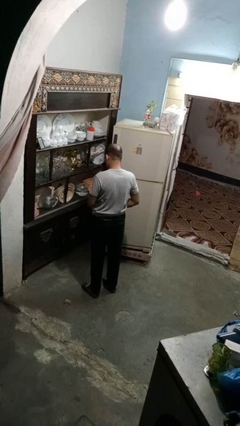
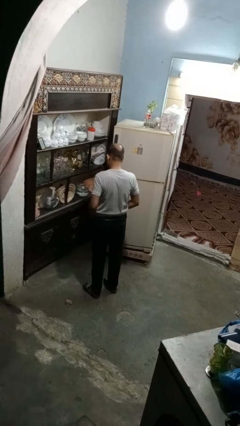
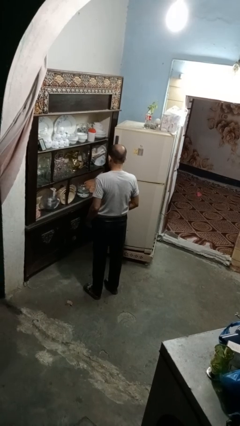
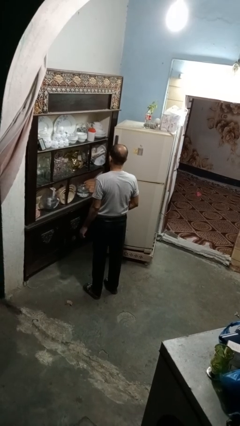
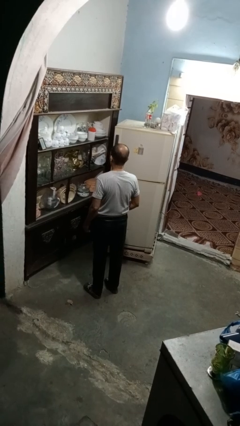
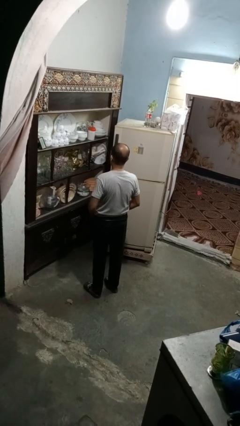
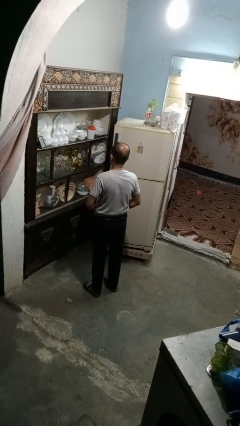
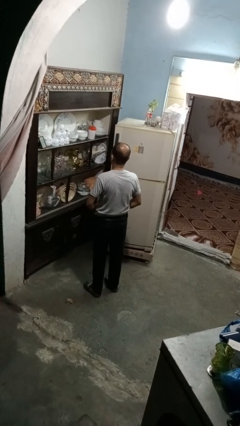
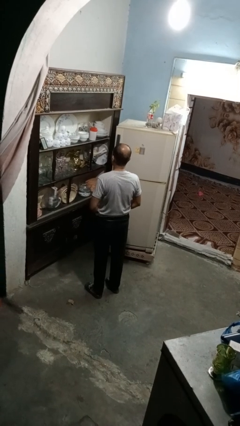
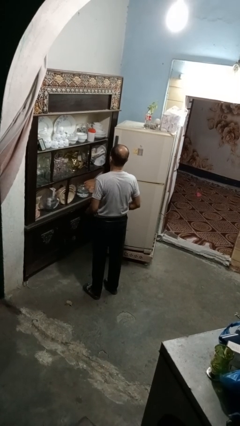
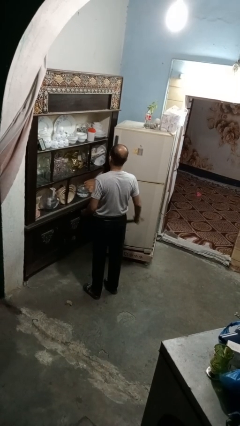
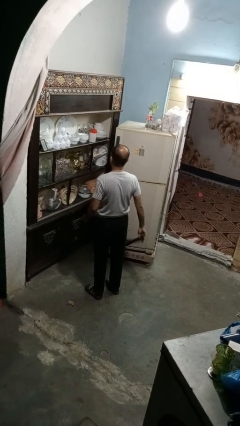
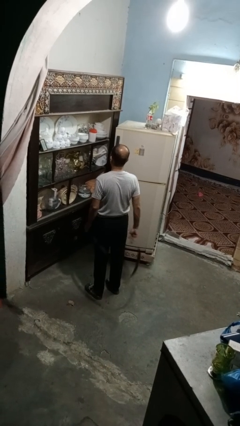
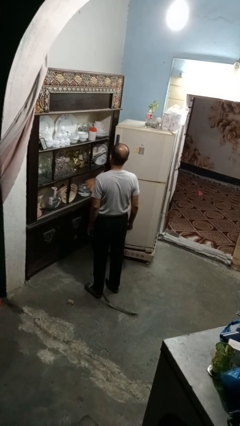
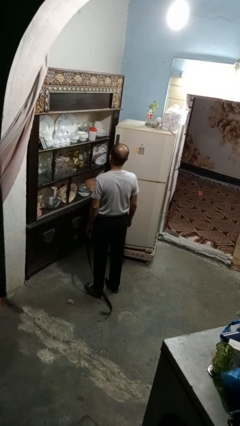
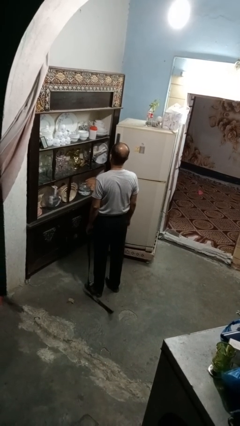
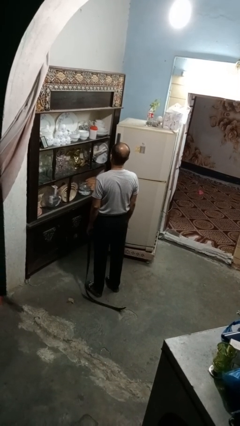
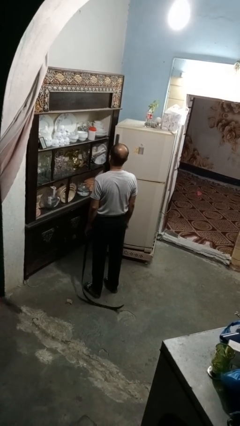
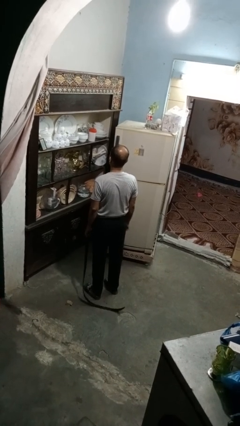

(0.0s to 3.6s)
person takes off belt

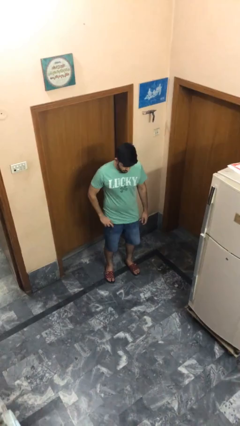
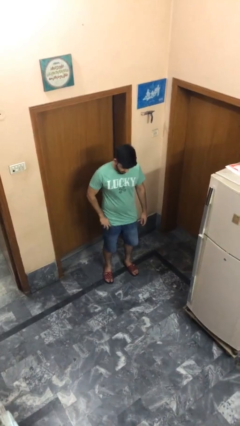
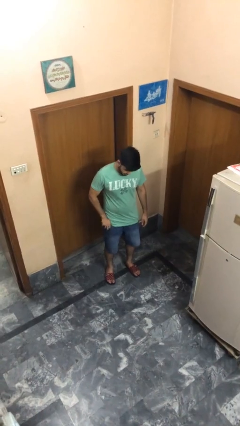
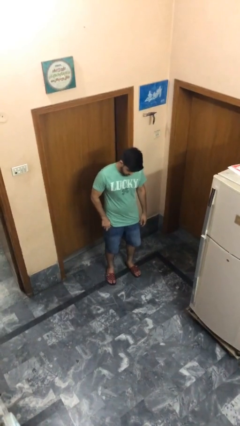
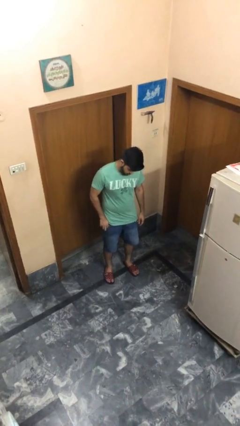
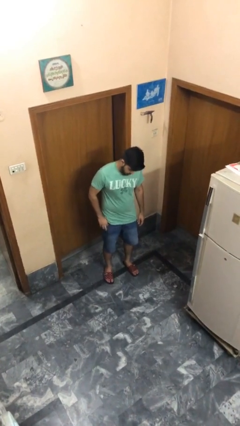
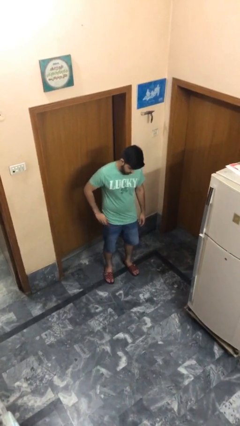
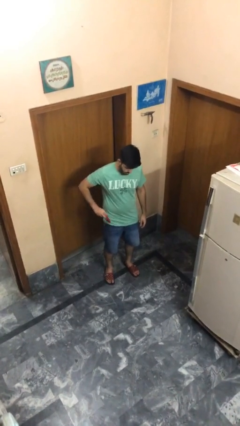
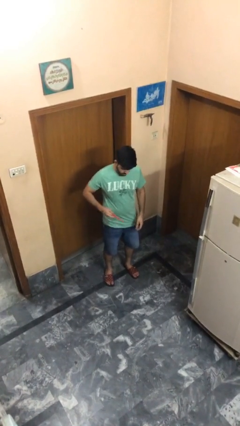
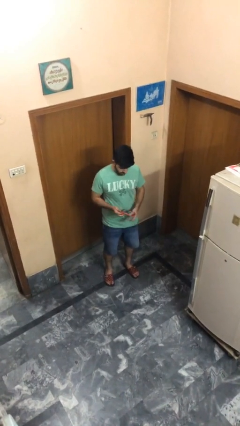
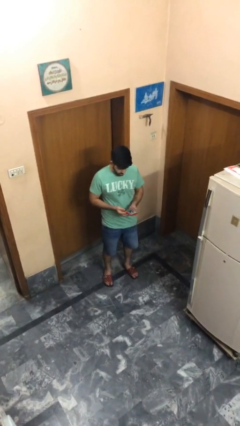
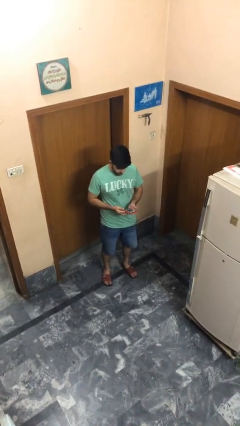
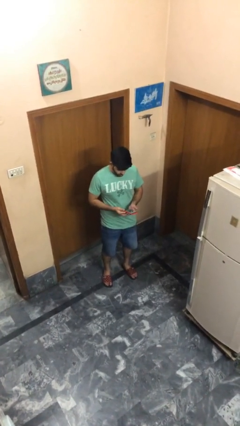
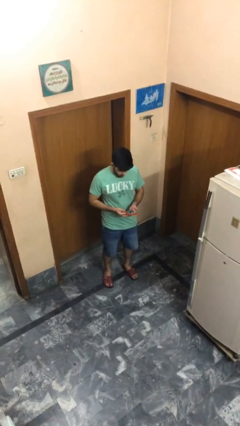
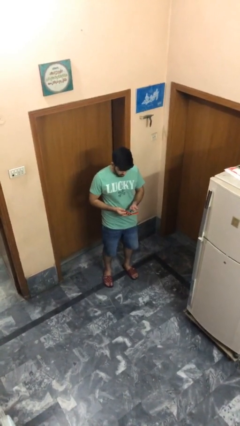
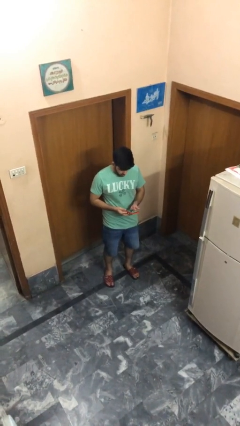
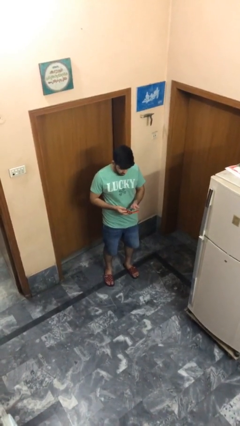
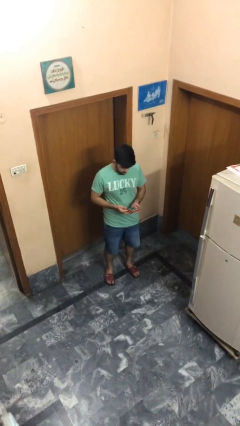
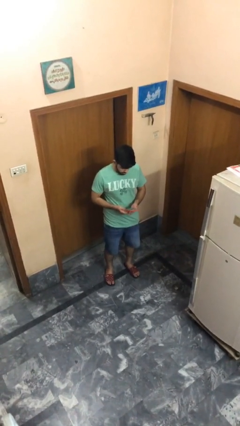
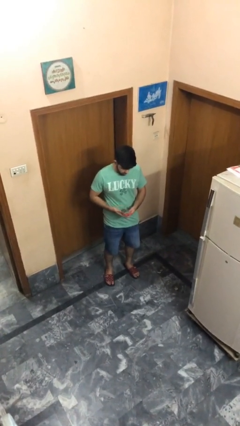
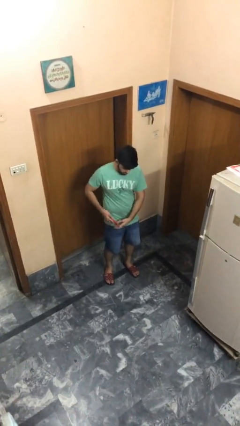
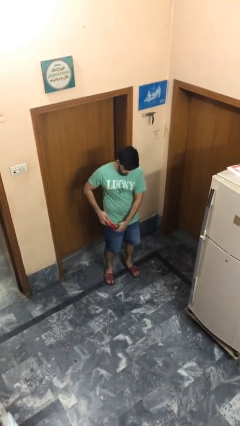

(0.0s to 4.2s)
person takes phone from pocket

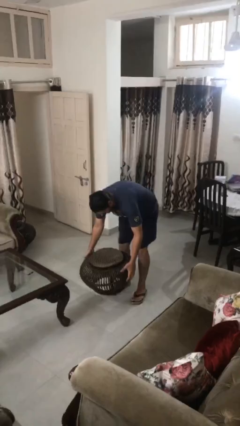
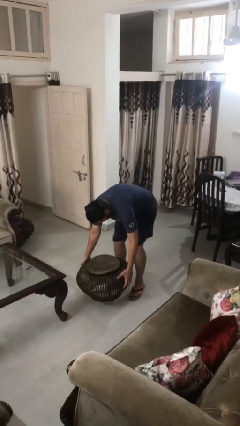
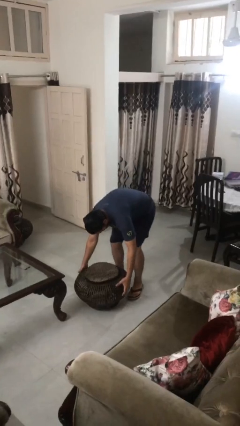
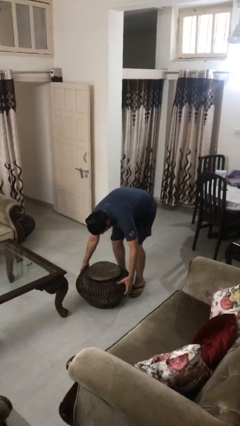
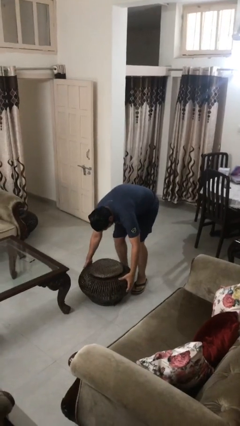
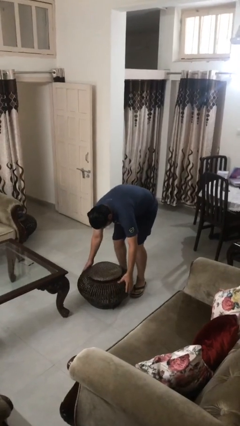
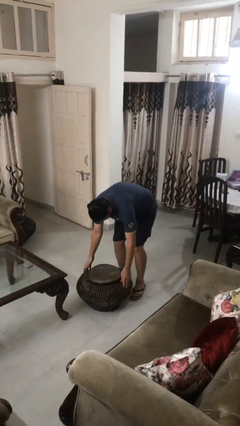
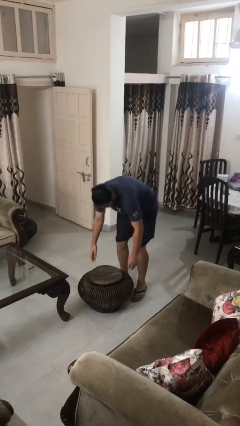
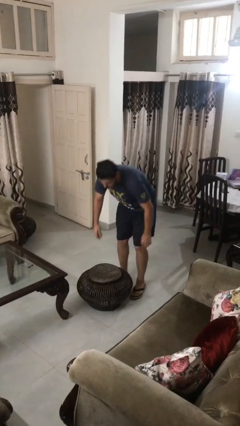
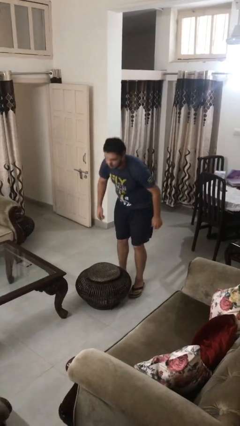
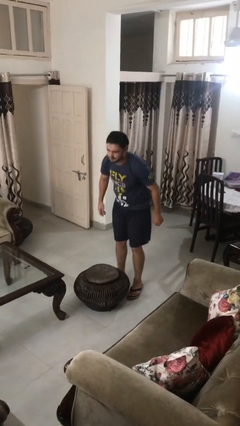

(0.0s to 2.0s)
person puts down object on floor

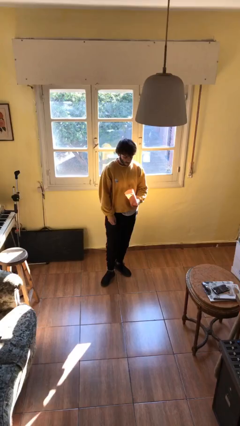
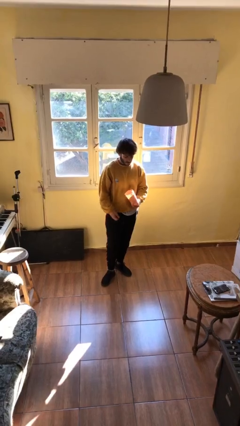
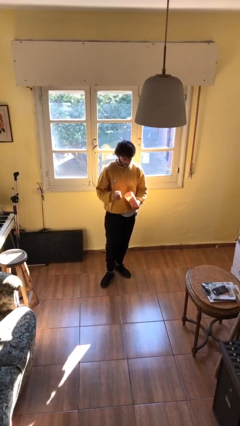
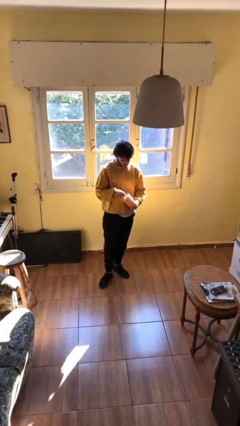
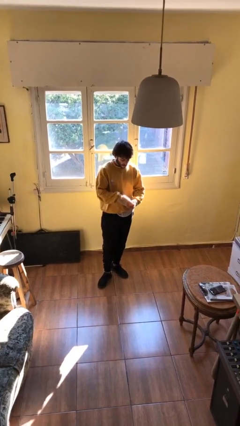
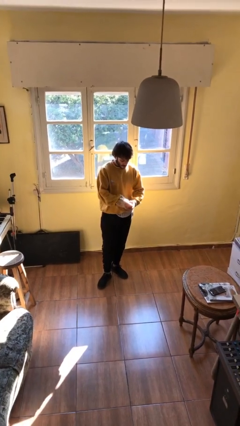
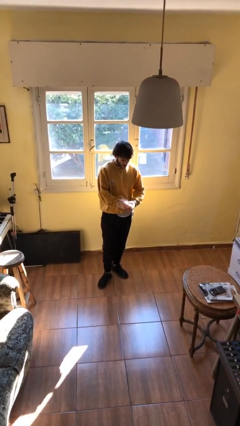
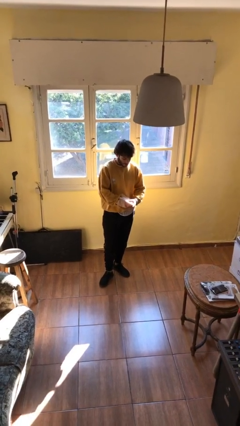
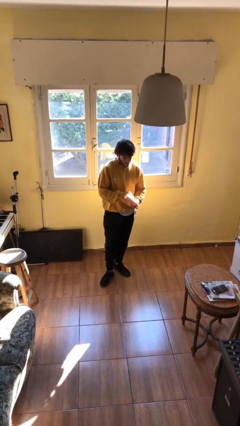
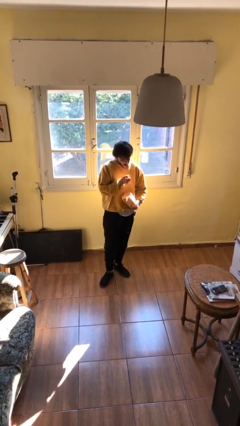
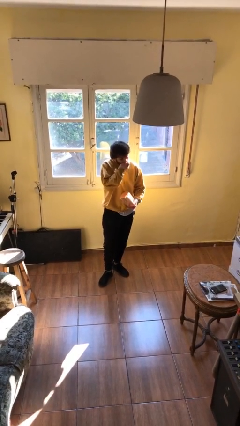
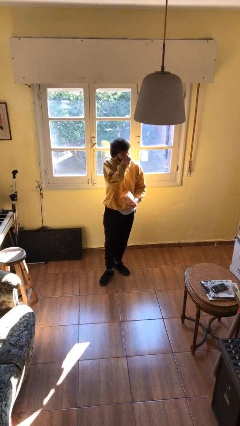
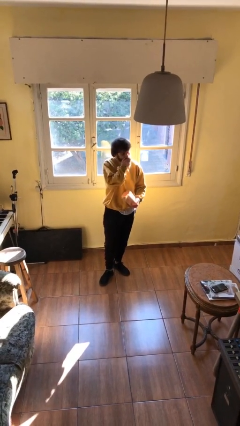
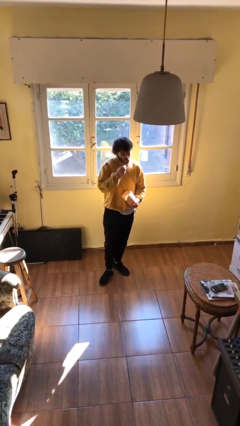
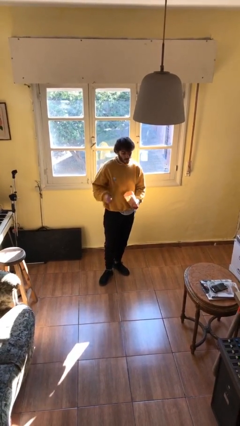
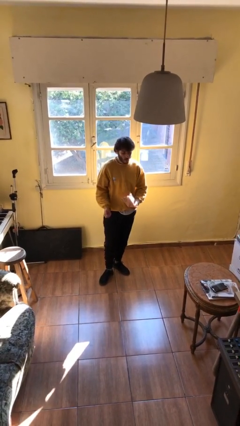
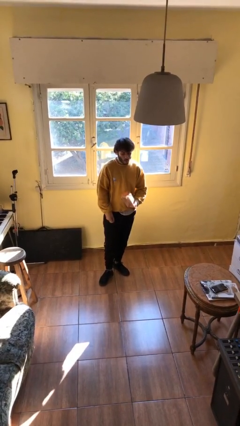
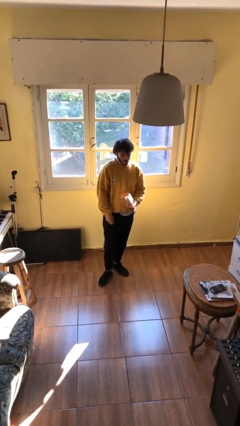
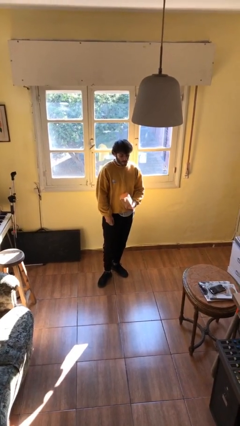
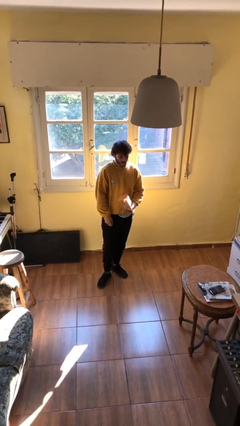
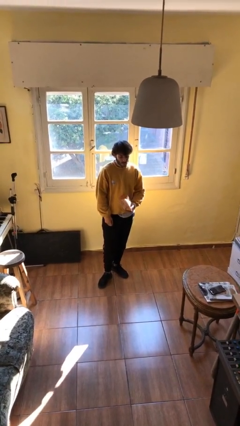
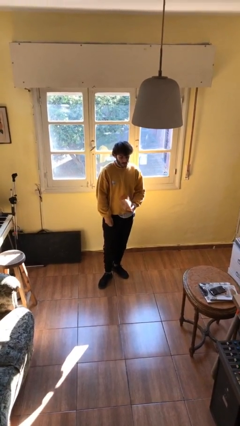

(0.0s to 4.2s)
person eats snack from bag

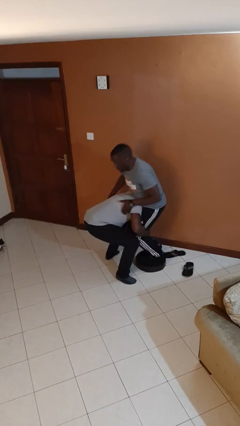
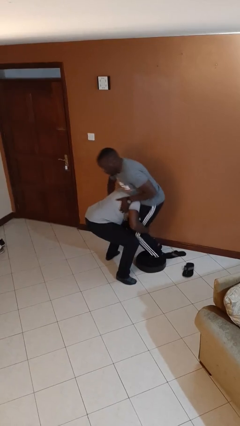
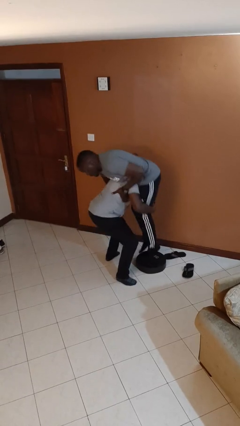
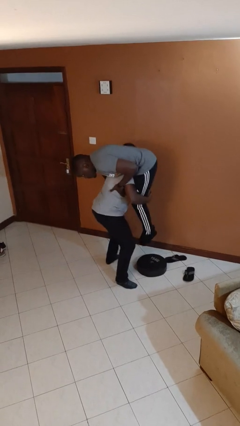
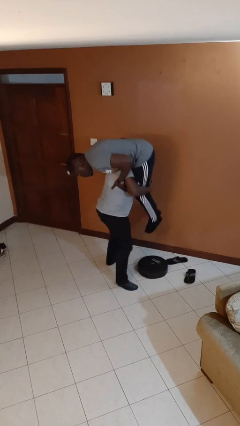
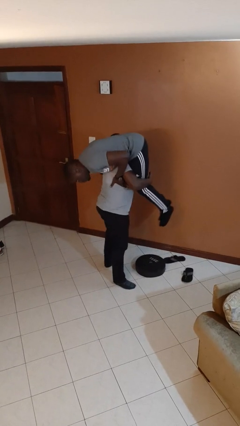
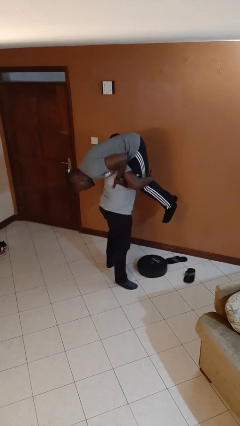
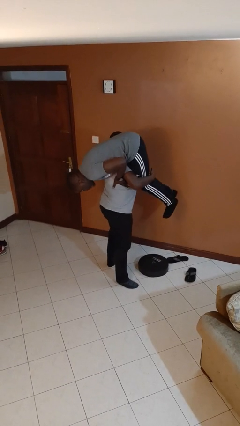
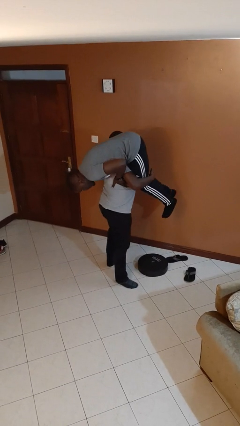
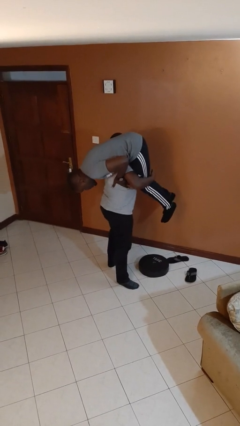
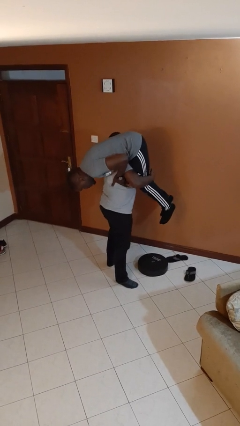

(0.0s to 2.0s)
person carries person over shoulder

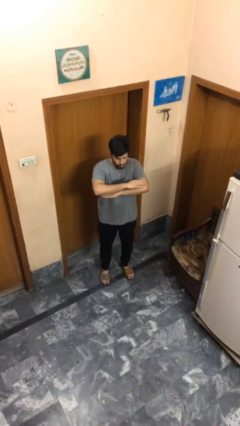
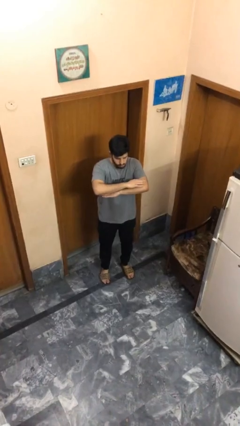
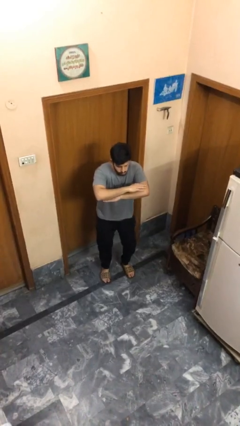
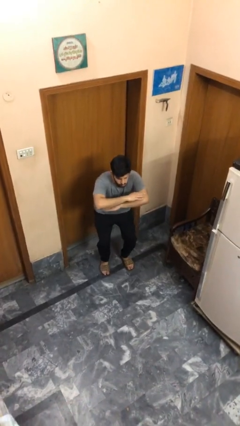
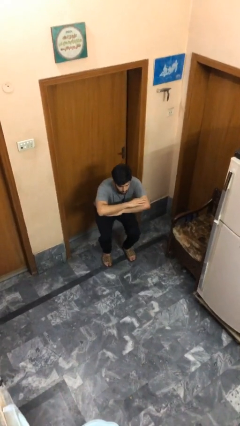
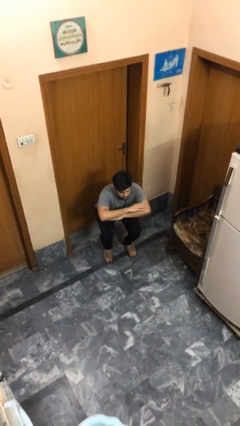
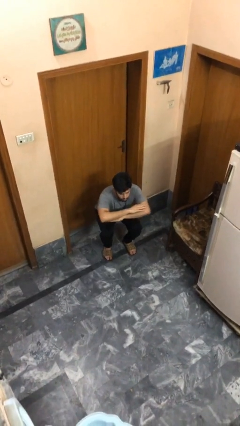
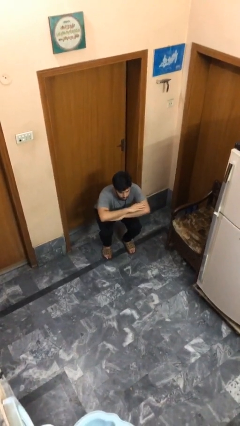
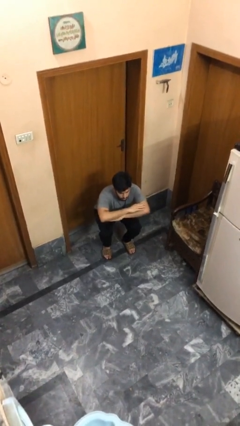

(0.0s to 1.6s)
person squats
